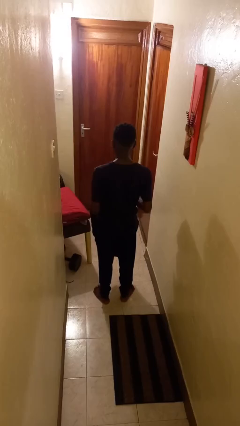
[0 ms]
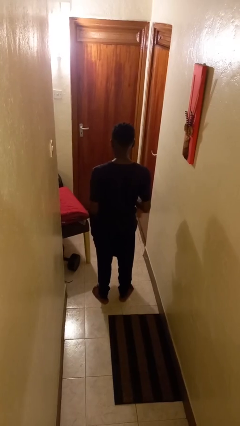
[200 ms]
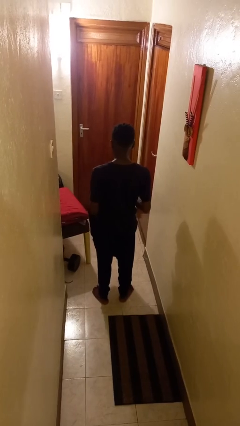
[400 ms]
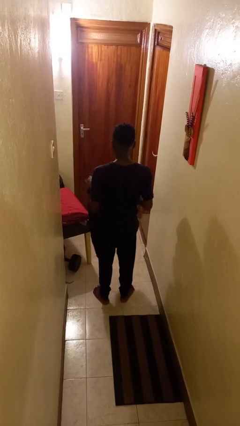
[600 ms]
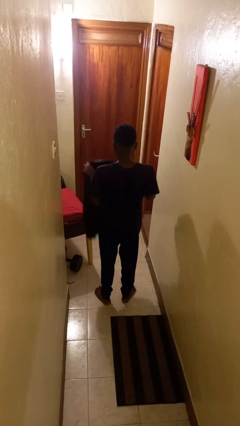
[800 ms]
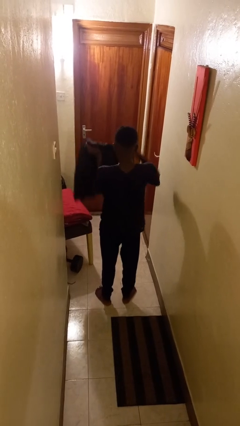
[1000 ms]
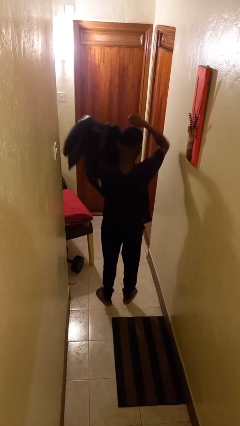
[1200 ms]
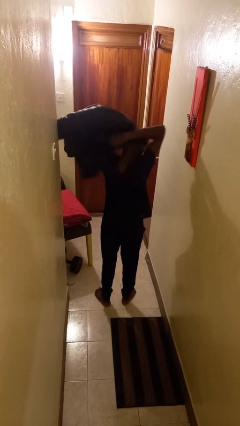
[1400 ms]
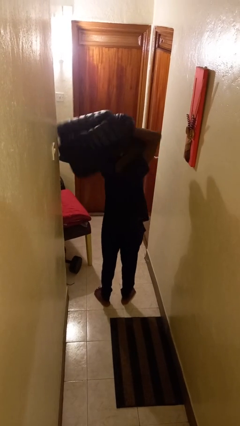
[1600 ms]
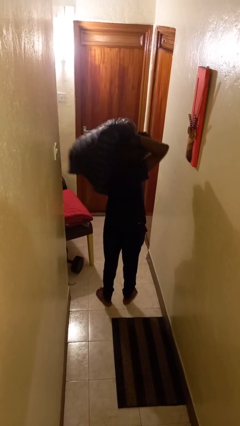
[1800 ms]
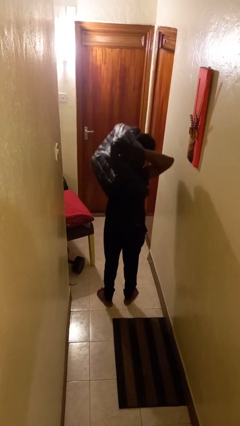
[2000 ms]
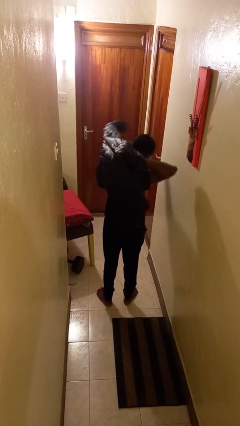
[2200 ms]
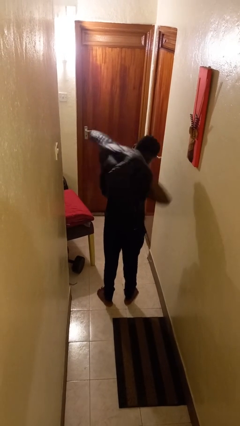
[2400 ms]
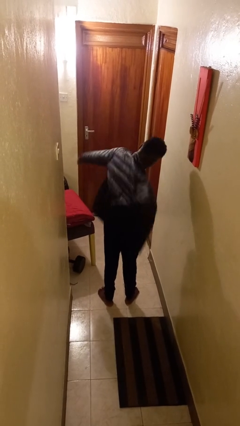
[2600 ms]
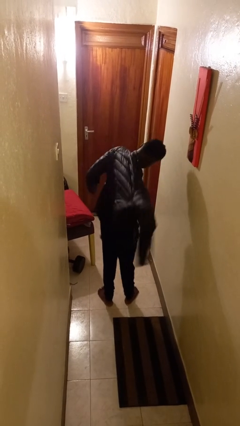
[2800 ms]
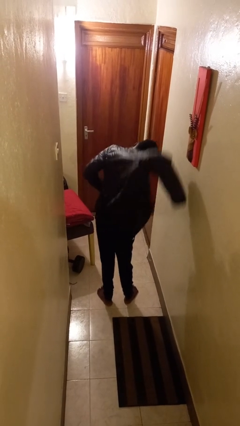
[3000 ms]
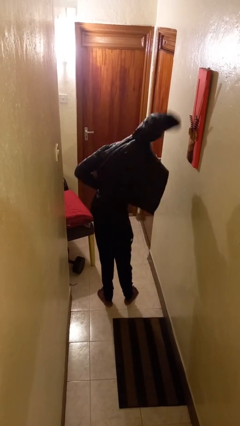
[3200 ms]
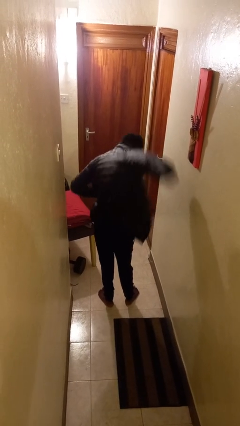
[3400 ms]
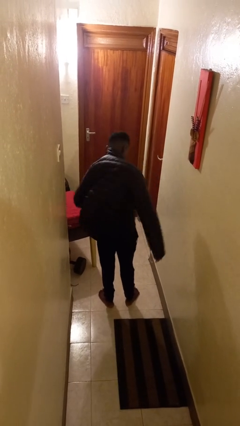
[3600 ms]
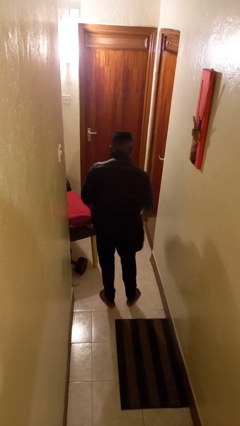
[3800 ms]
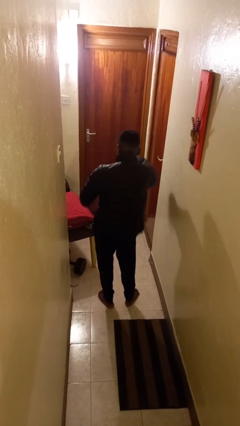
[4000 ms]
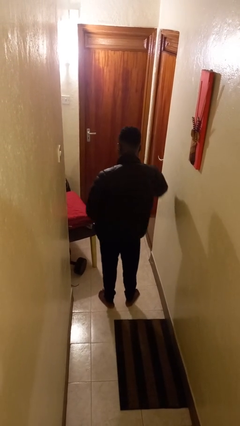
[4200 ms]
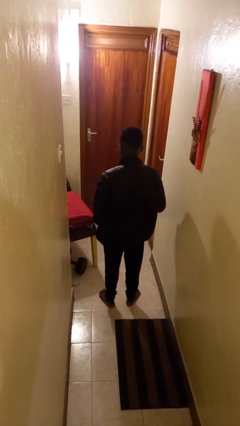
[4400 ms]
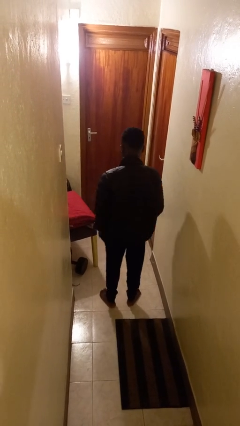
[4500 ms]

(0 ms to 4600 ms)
person puts on jacket

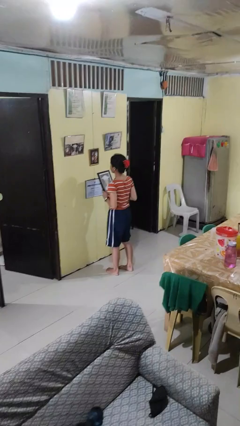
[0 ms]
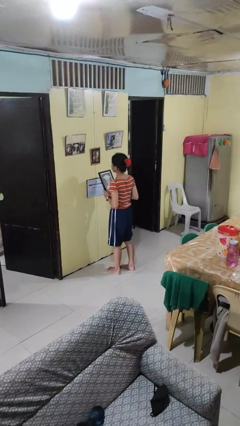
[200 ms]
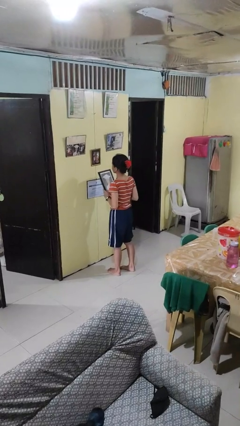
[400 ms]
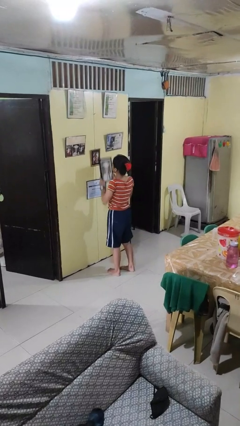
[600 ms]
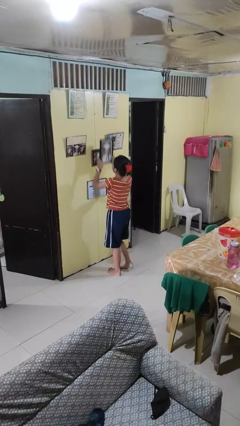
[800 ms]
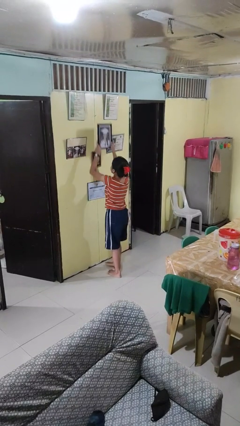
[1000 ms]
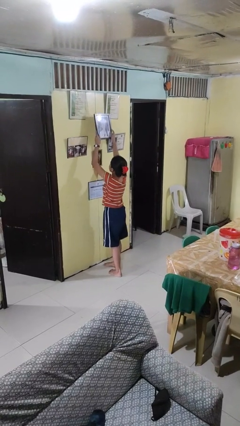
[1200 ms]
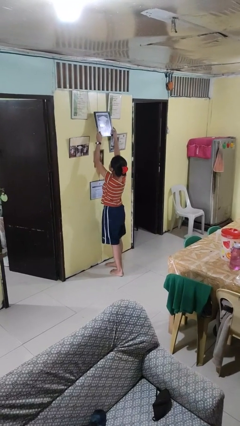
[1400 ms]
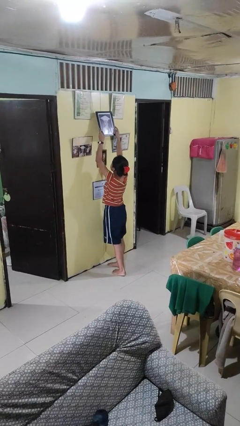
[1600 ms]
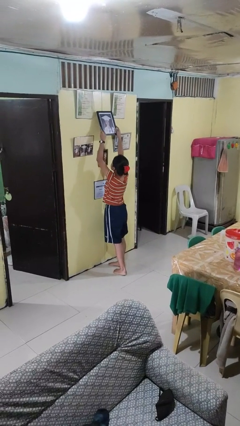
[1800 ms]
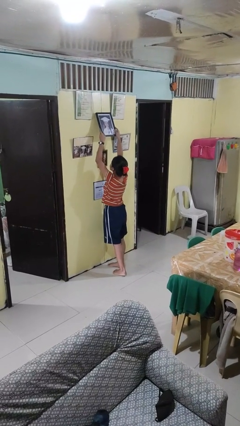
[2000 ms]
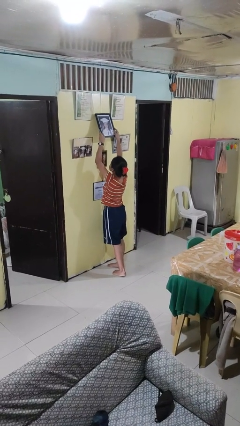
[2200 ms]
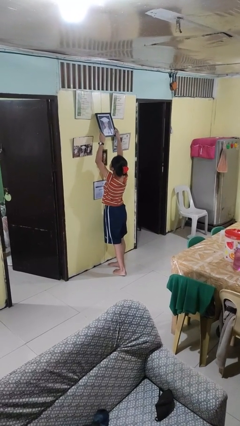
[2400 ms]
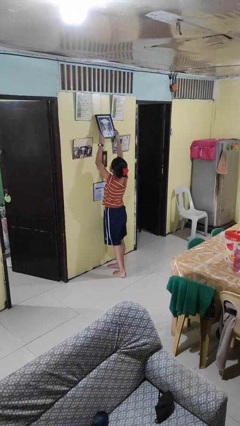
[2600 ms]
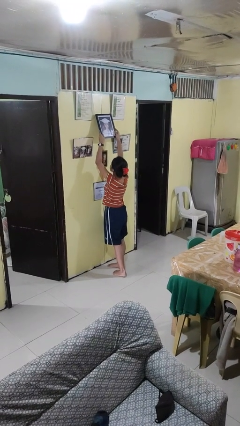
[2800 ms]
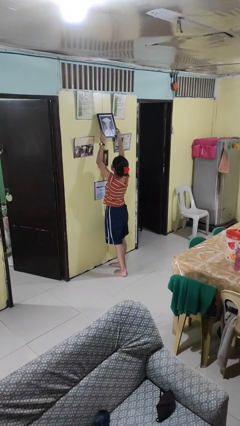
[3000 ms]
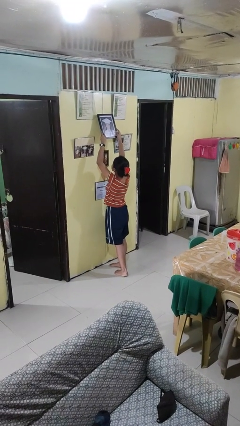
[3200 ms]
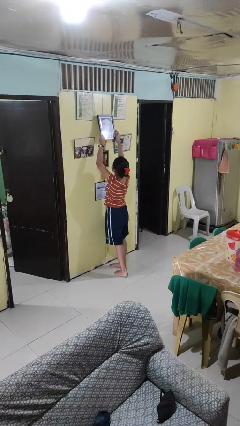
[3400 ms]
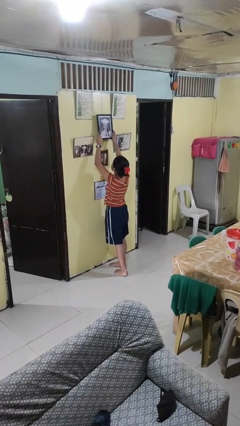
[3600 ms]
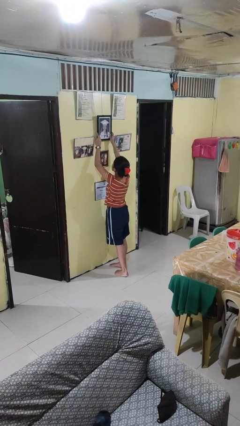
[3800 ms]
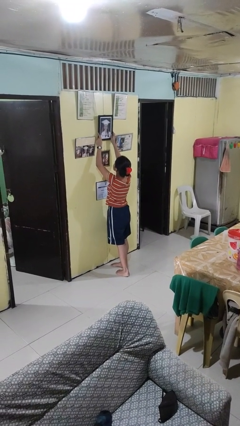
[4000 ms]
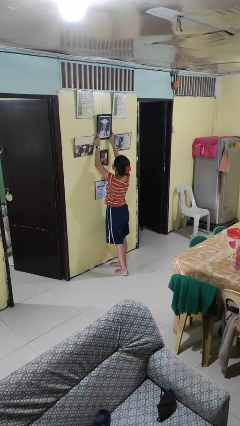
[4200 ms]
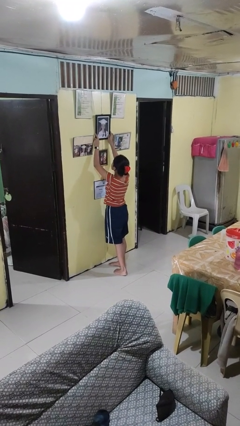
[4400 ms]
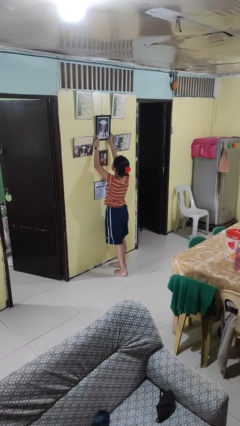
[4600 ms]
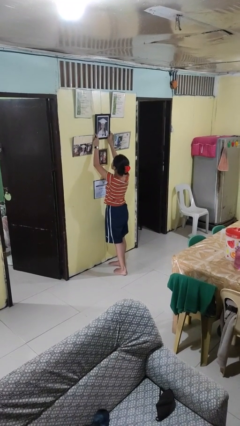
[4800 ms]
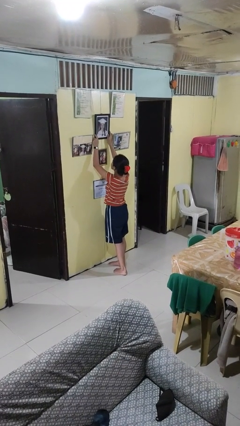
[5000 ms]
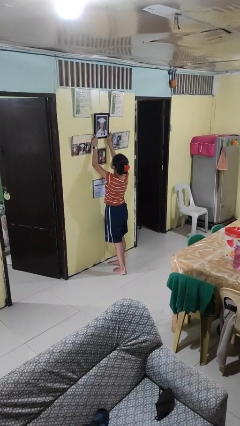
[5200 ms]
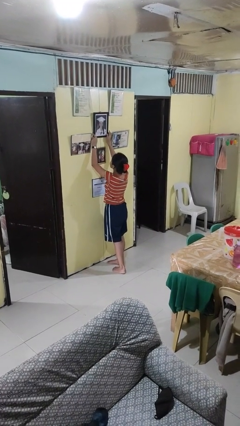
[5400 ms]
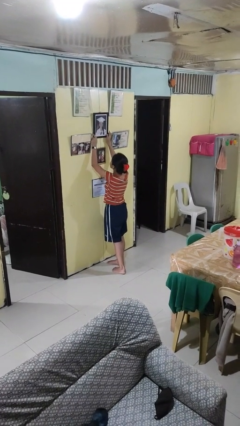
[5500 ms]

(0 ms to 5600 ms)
person puts up picture frame

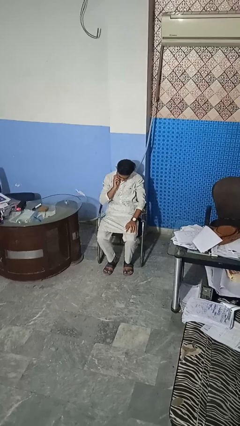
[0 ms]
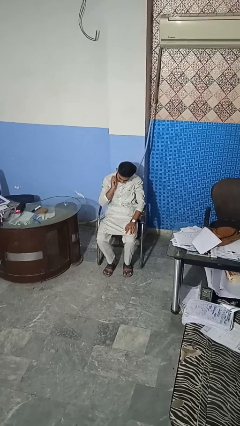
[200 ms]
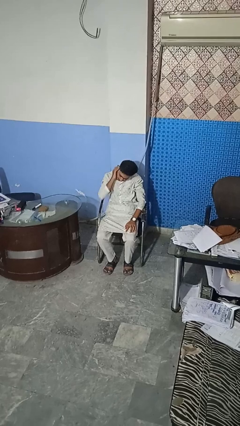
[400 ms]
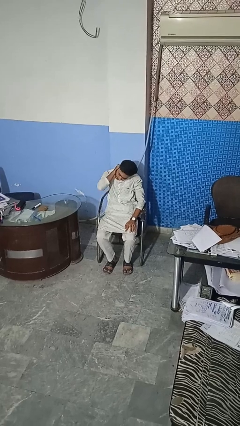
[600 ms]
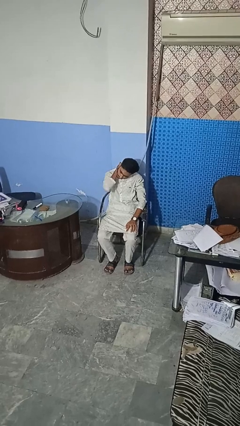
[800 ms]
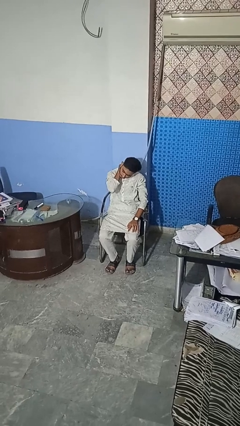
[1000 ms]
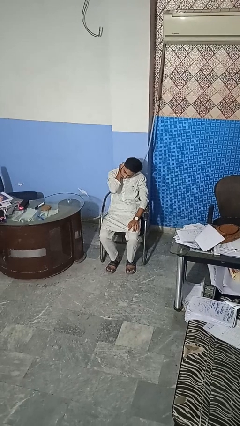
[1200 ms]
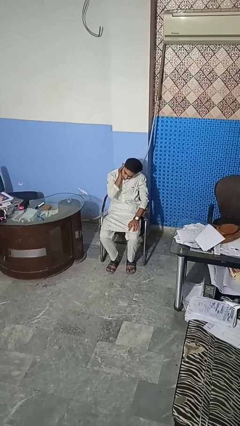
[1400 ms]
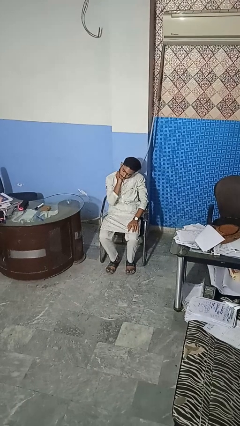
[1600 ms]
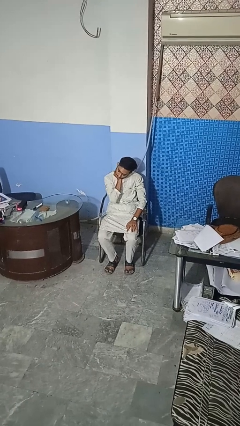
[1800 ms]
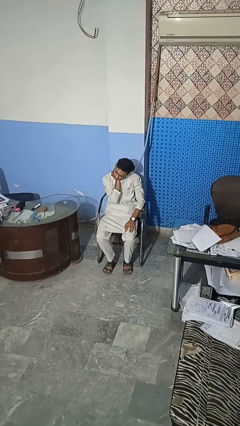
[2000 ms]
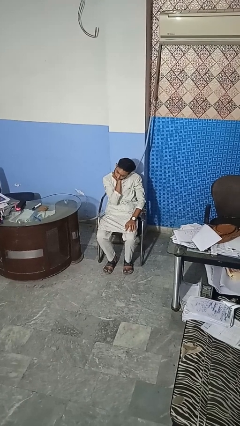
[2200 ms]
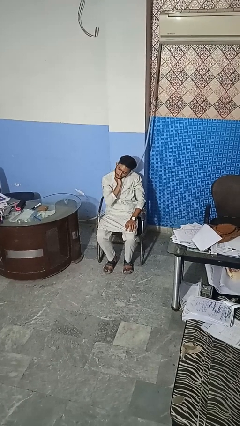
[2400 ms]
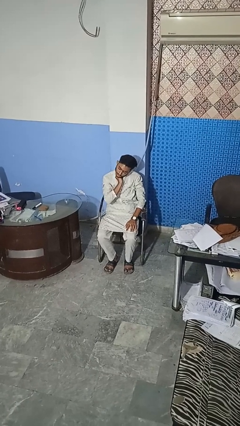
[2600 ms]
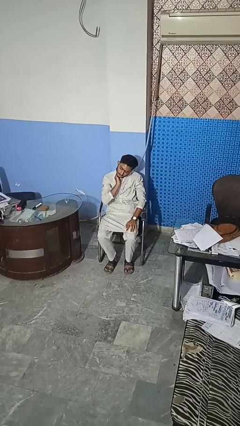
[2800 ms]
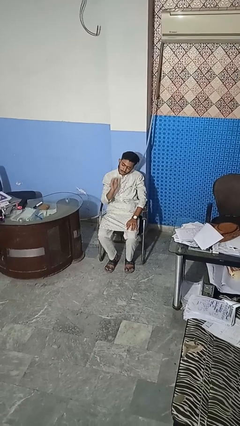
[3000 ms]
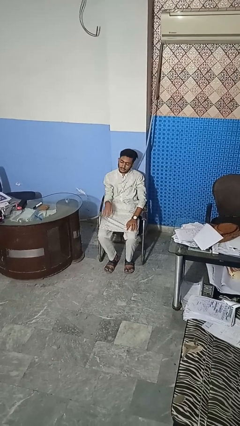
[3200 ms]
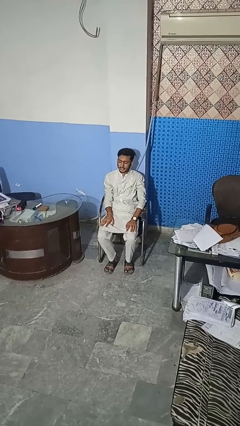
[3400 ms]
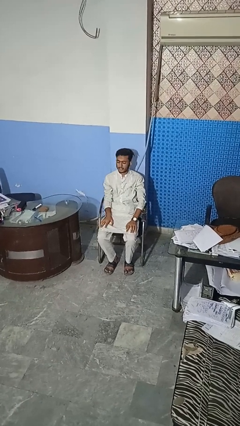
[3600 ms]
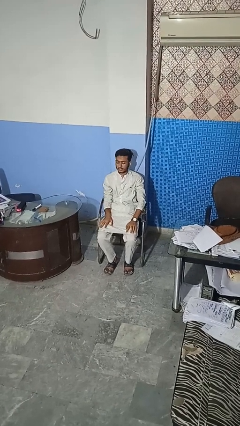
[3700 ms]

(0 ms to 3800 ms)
person rubs neck

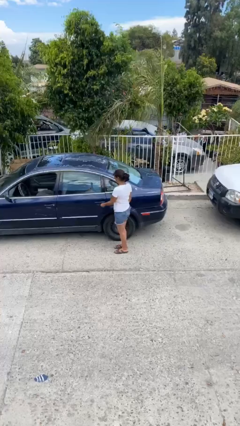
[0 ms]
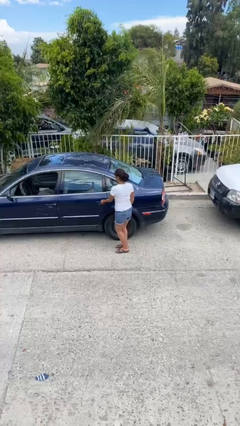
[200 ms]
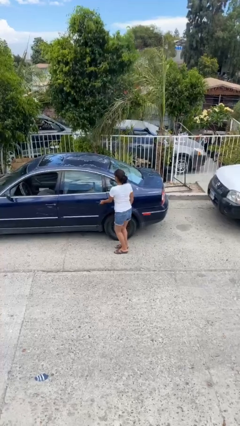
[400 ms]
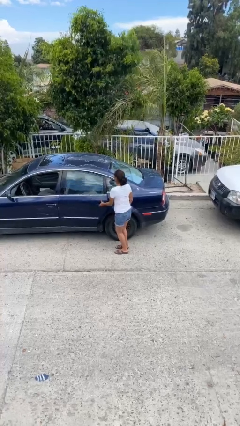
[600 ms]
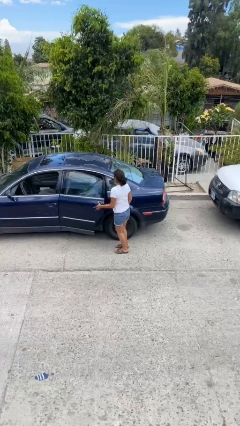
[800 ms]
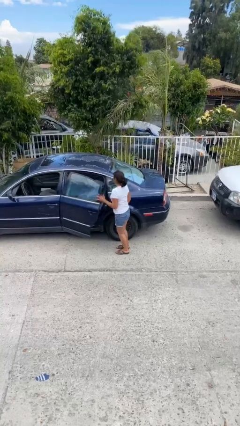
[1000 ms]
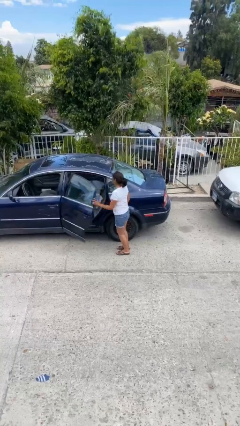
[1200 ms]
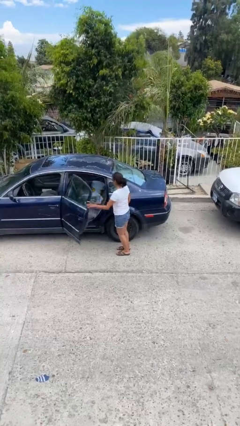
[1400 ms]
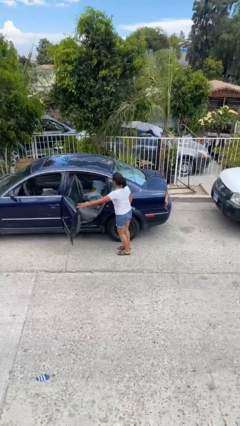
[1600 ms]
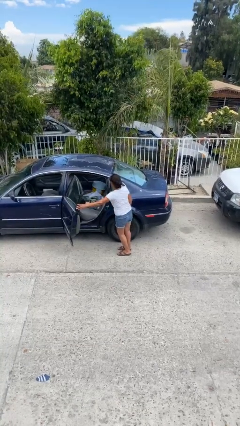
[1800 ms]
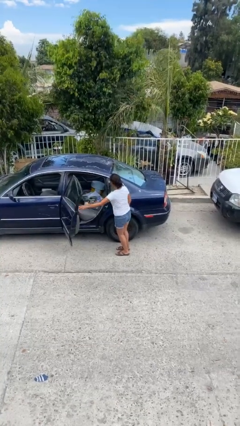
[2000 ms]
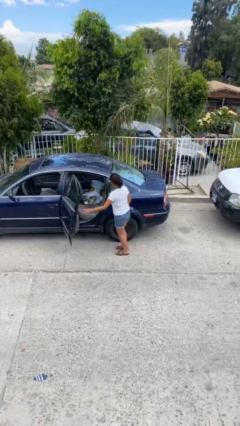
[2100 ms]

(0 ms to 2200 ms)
person opens car door

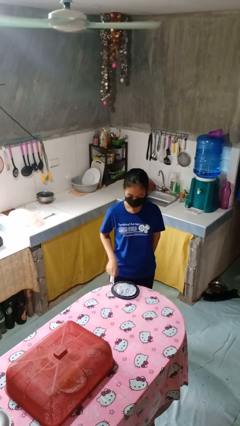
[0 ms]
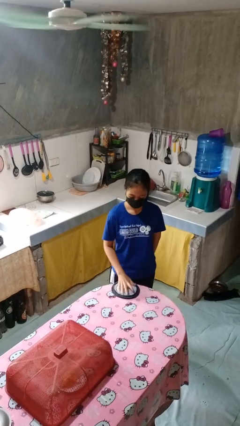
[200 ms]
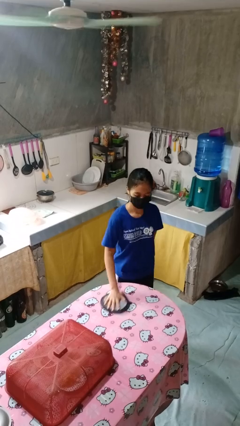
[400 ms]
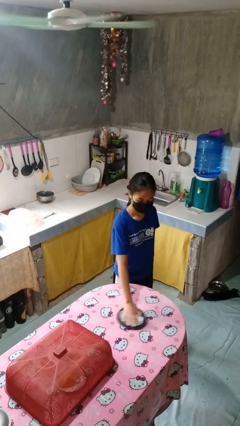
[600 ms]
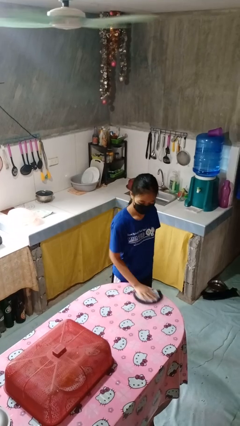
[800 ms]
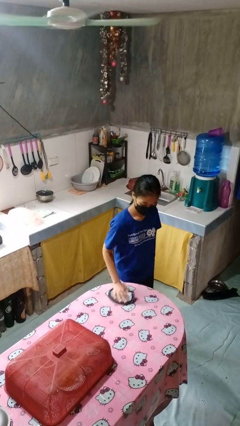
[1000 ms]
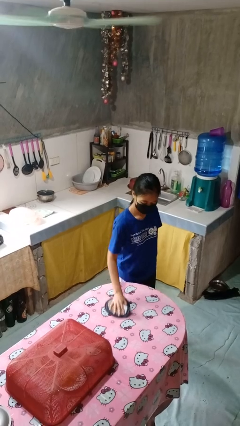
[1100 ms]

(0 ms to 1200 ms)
person cleans table with rag

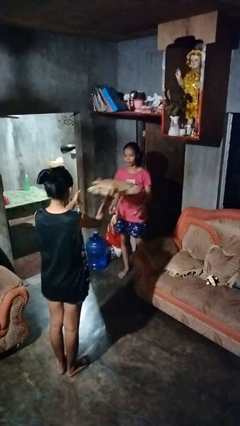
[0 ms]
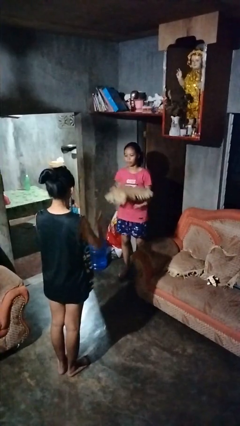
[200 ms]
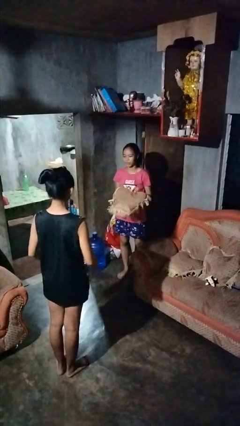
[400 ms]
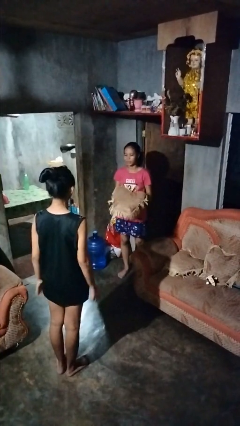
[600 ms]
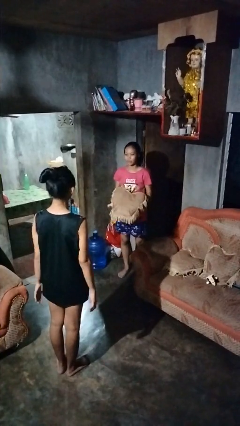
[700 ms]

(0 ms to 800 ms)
person catches object from person
